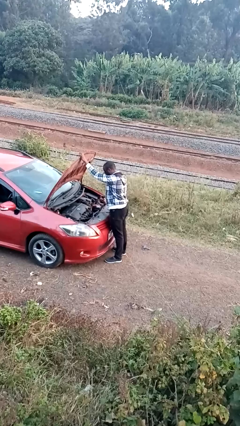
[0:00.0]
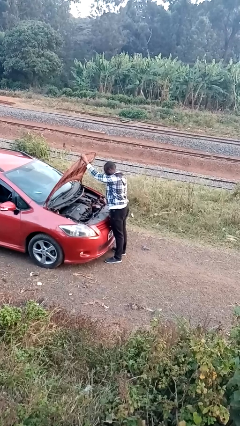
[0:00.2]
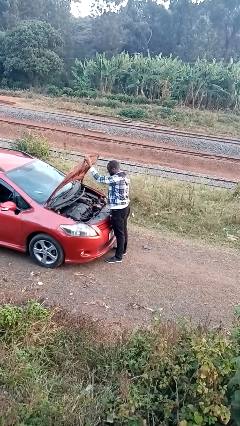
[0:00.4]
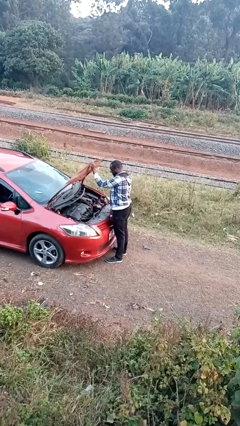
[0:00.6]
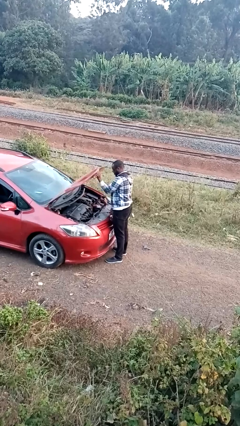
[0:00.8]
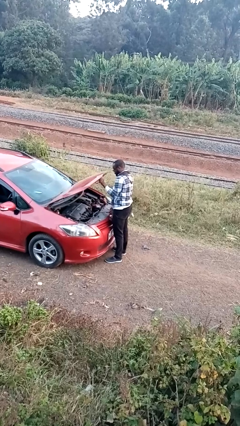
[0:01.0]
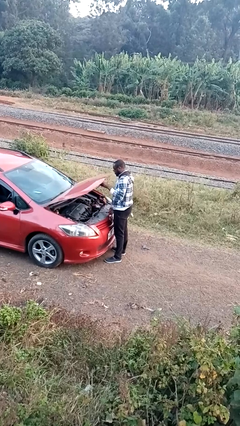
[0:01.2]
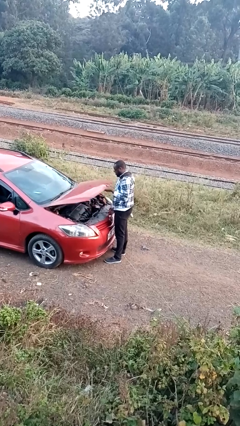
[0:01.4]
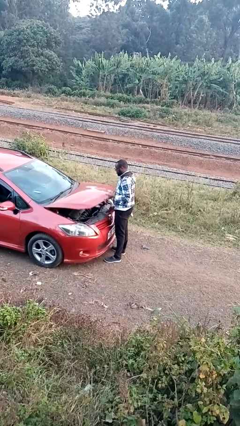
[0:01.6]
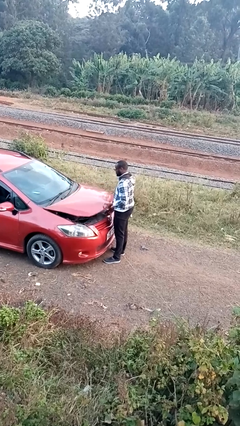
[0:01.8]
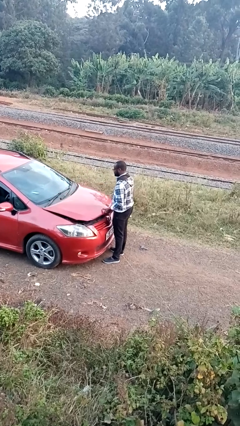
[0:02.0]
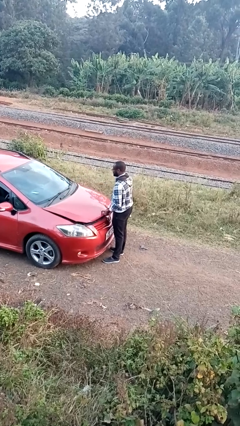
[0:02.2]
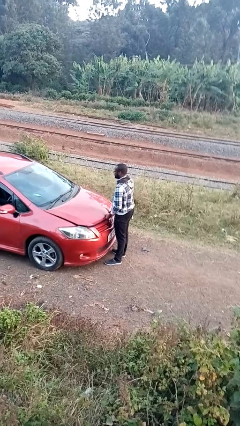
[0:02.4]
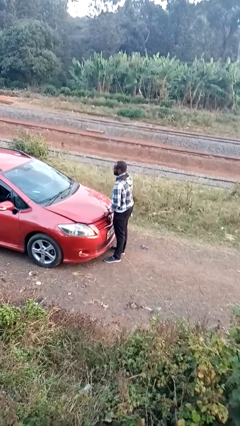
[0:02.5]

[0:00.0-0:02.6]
person closes car hood

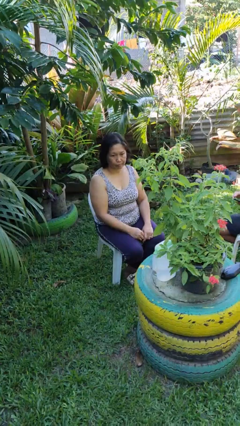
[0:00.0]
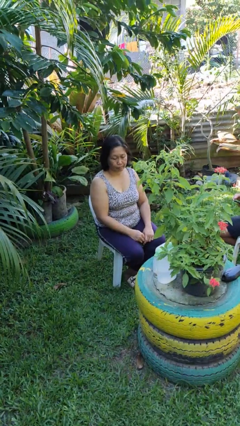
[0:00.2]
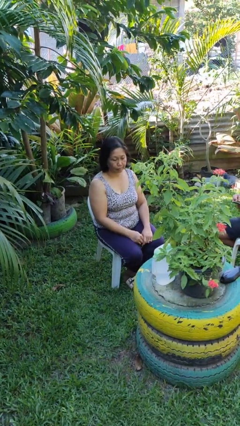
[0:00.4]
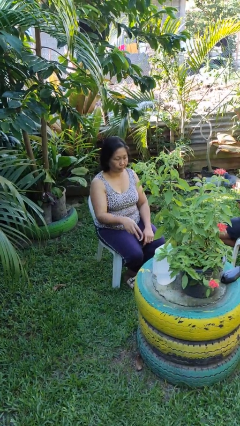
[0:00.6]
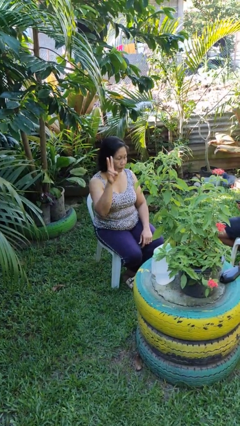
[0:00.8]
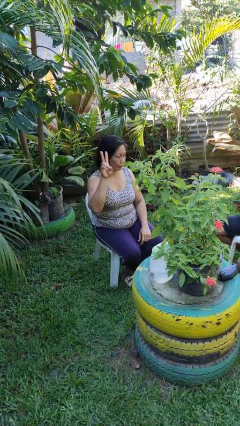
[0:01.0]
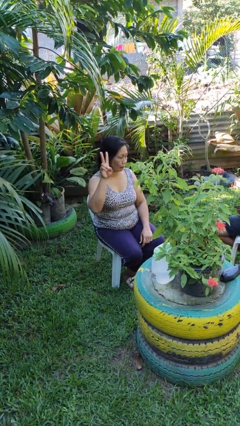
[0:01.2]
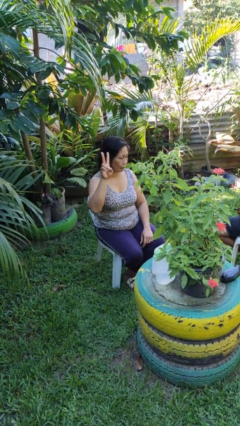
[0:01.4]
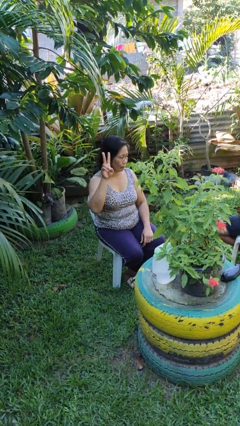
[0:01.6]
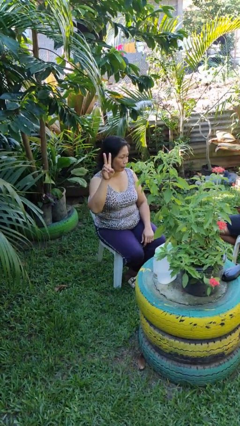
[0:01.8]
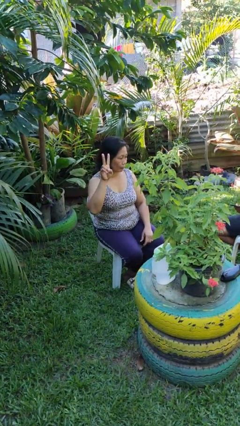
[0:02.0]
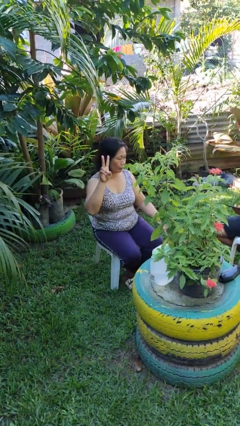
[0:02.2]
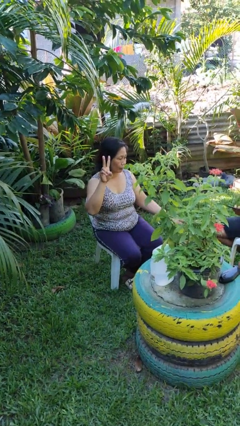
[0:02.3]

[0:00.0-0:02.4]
person gestures peace

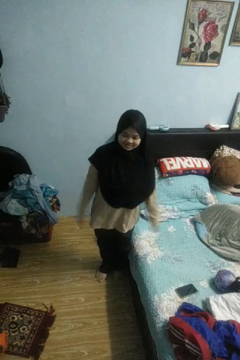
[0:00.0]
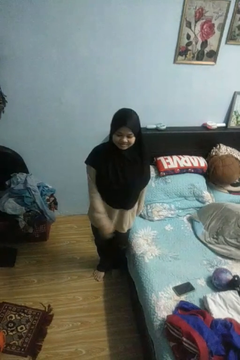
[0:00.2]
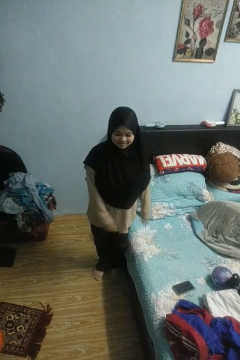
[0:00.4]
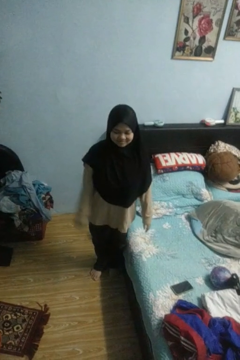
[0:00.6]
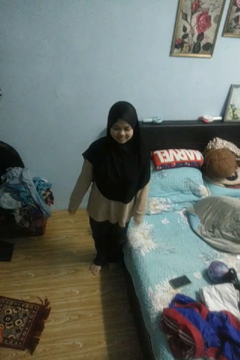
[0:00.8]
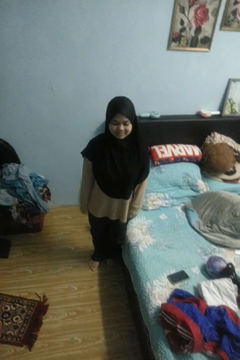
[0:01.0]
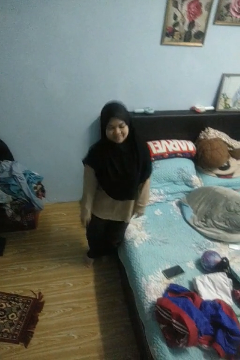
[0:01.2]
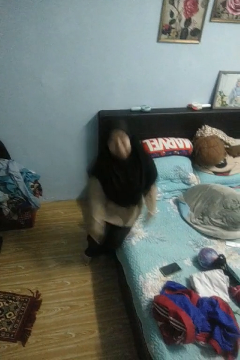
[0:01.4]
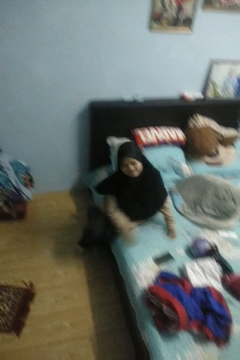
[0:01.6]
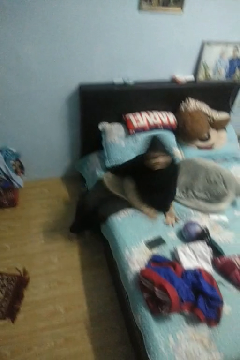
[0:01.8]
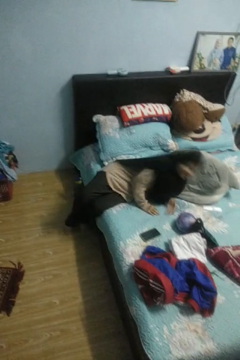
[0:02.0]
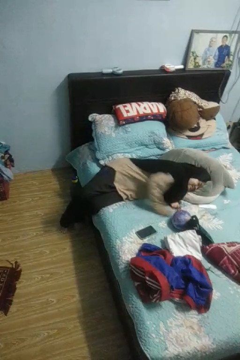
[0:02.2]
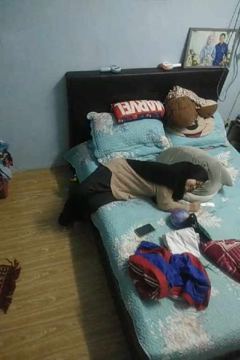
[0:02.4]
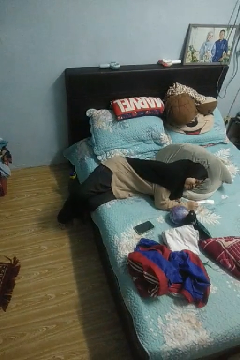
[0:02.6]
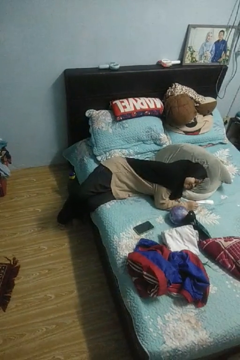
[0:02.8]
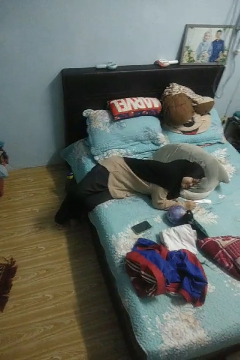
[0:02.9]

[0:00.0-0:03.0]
person lies down on bed

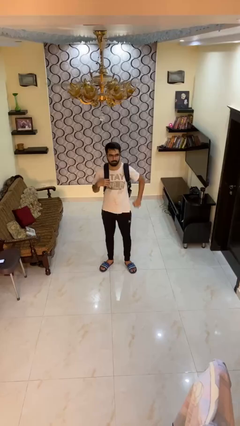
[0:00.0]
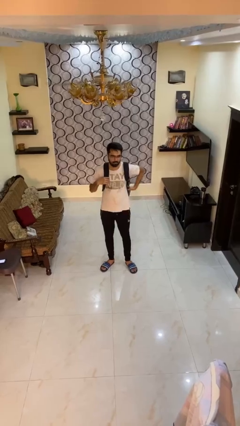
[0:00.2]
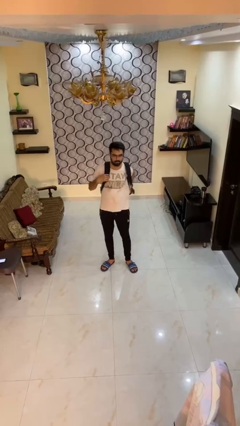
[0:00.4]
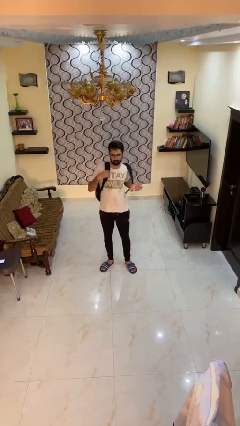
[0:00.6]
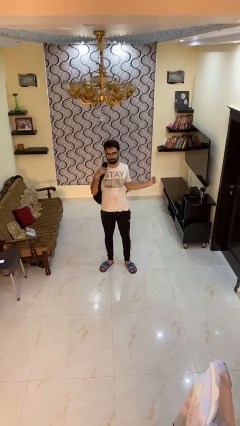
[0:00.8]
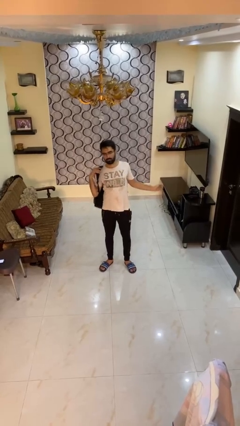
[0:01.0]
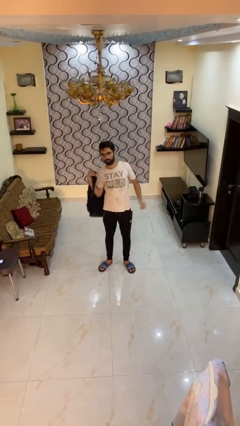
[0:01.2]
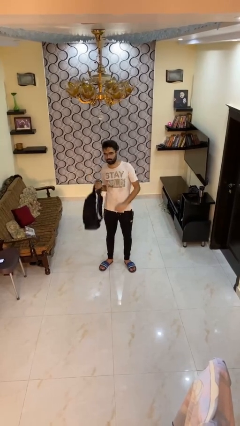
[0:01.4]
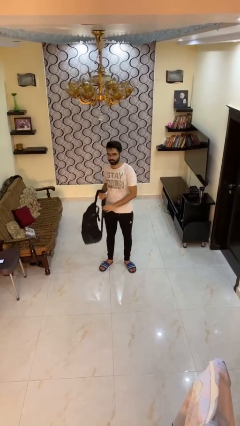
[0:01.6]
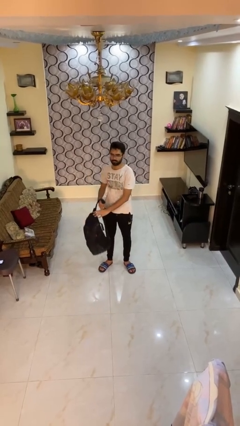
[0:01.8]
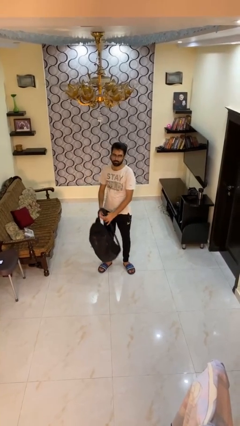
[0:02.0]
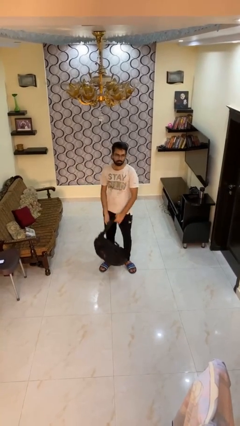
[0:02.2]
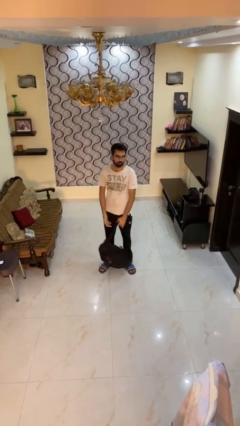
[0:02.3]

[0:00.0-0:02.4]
person takes off backpack

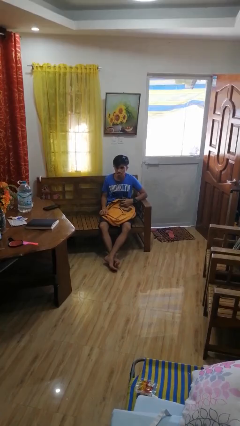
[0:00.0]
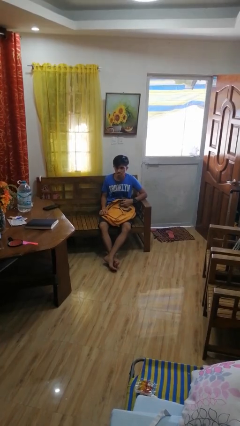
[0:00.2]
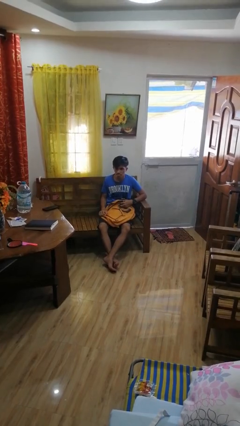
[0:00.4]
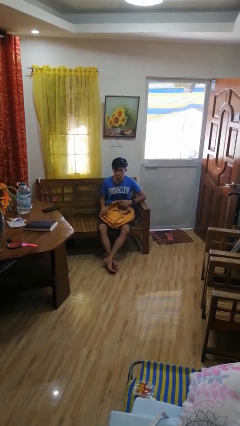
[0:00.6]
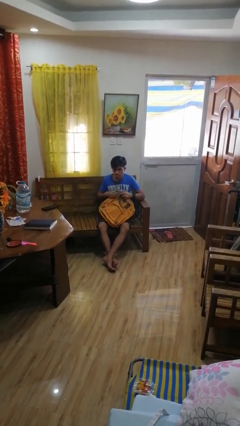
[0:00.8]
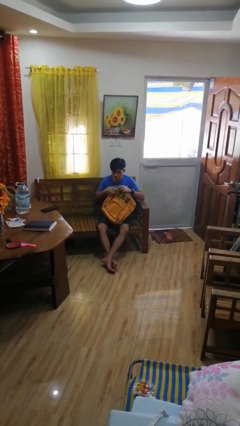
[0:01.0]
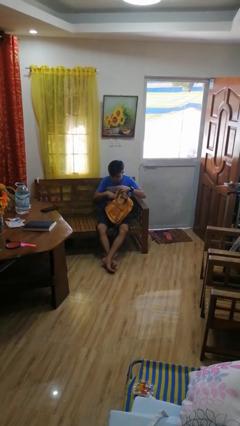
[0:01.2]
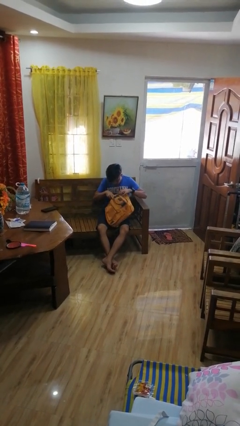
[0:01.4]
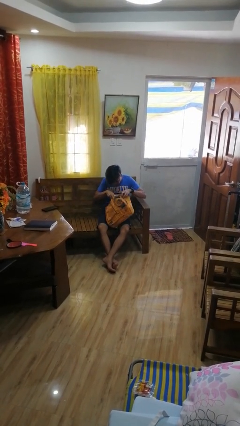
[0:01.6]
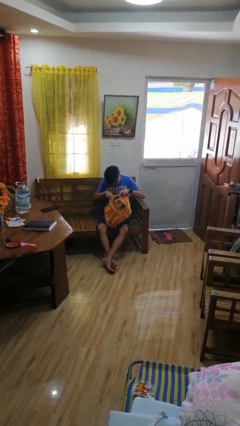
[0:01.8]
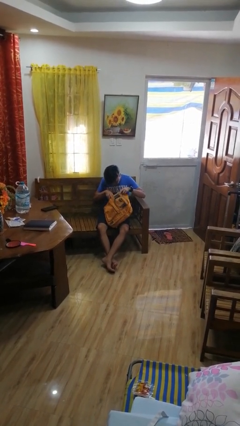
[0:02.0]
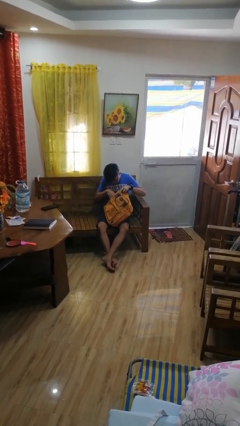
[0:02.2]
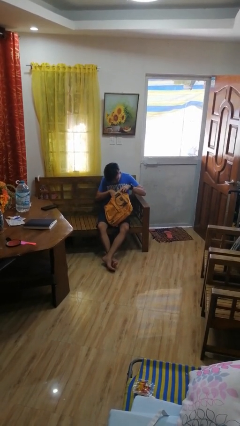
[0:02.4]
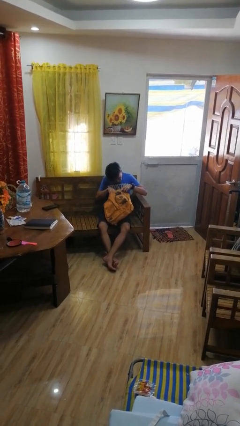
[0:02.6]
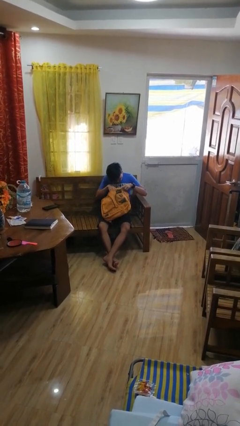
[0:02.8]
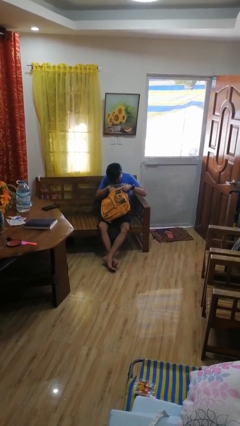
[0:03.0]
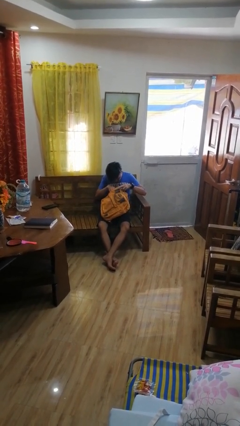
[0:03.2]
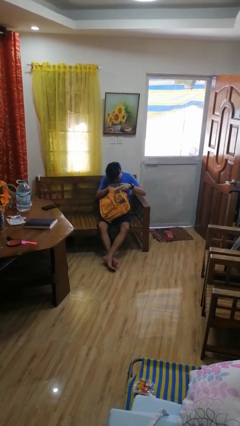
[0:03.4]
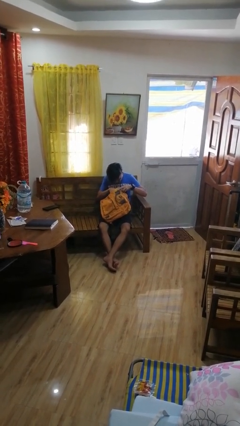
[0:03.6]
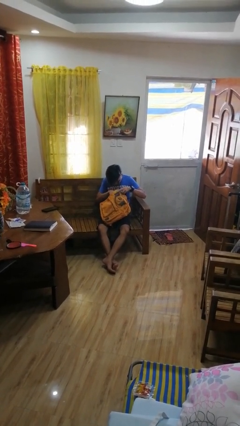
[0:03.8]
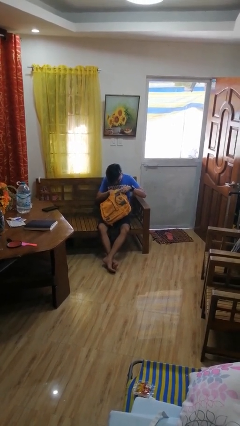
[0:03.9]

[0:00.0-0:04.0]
person searches in backpack

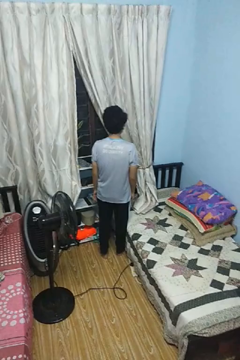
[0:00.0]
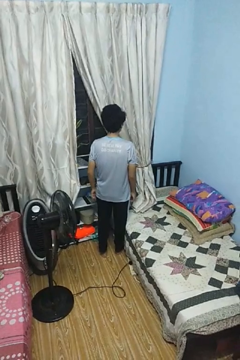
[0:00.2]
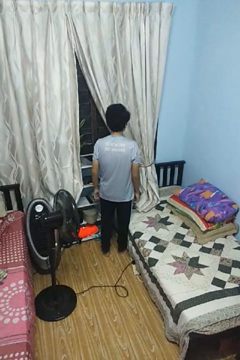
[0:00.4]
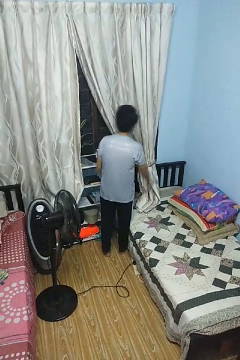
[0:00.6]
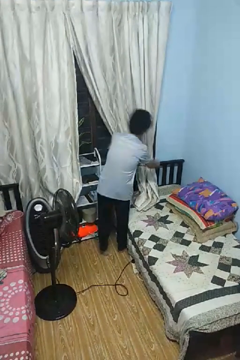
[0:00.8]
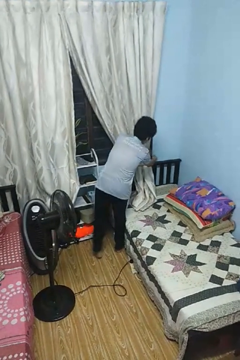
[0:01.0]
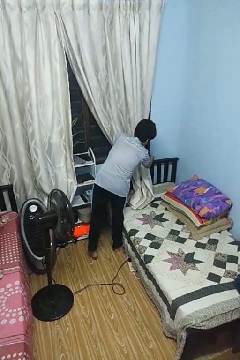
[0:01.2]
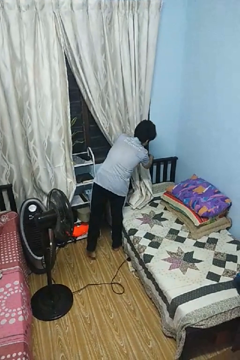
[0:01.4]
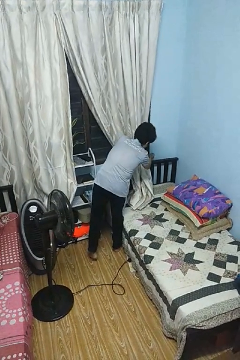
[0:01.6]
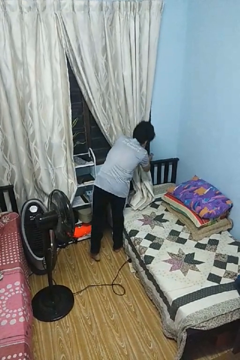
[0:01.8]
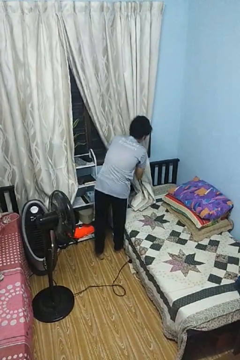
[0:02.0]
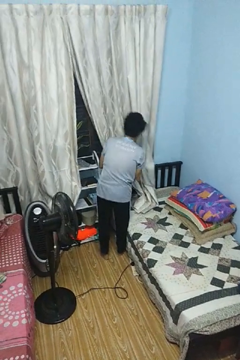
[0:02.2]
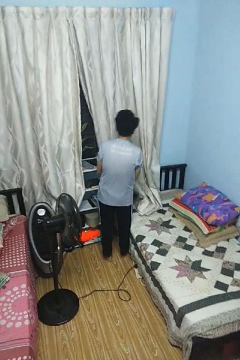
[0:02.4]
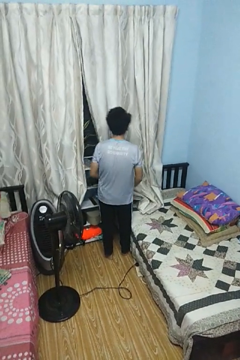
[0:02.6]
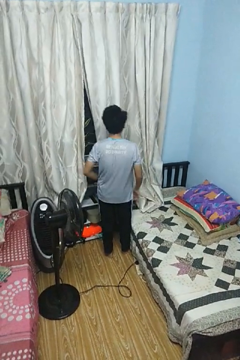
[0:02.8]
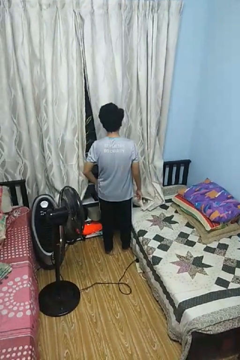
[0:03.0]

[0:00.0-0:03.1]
person closes curtains

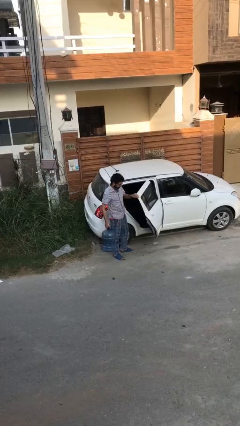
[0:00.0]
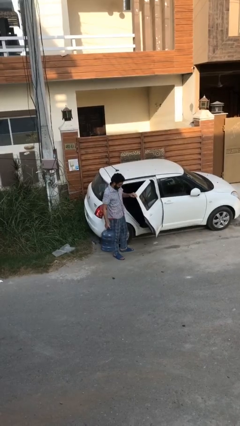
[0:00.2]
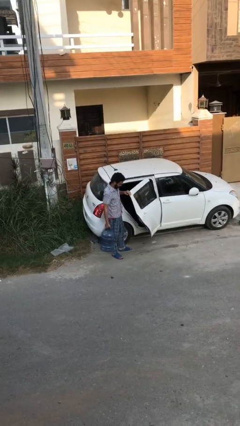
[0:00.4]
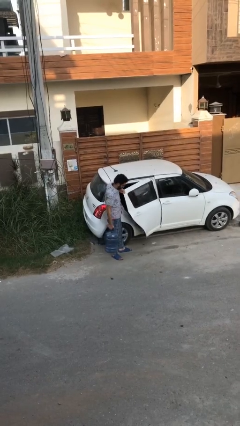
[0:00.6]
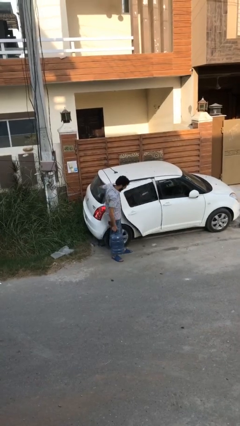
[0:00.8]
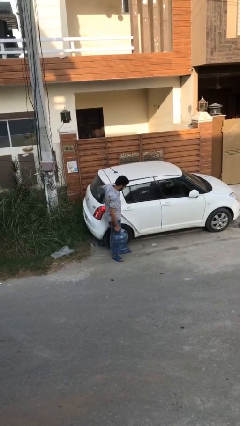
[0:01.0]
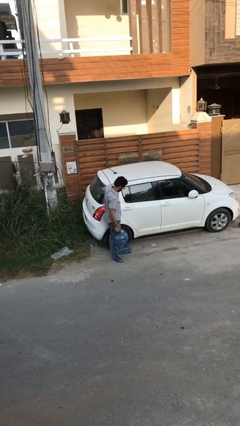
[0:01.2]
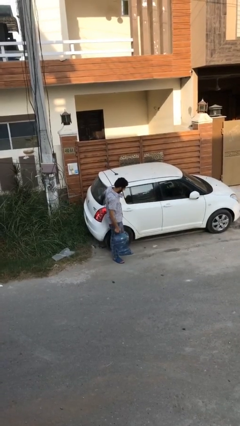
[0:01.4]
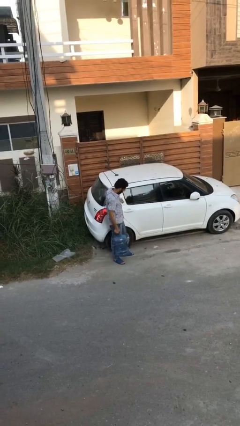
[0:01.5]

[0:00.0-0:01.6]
person closes car door
